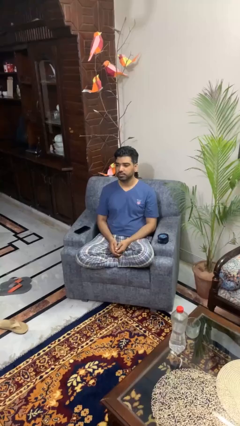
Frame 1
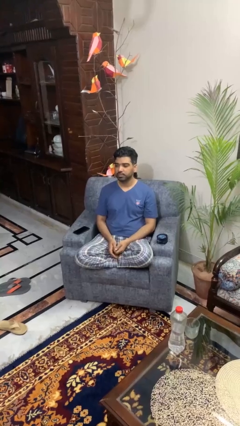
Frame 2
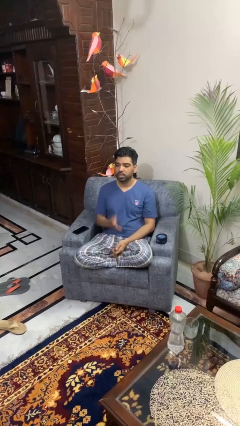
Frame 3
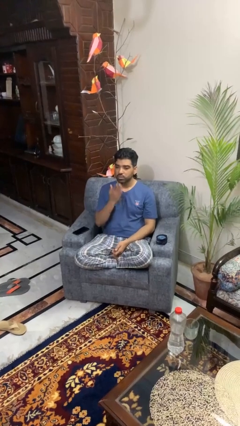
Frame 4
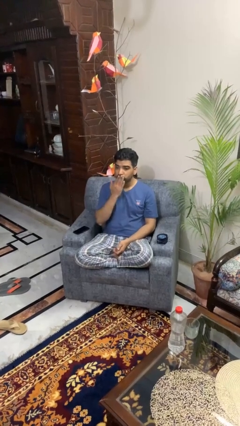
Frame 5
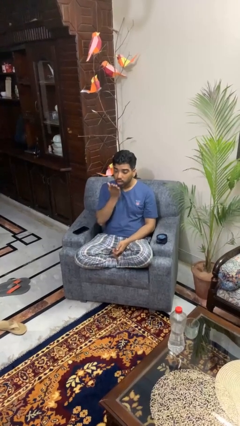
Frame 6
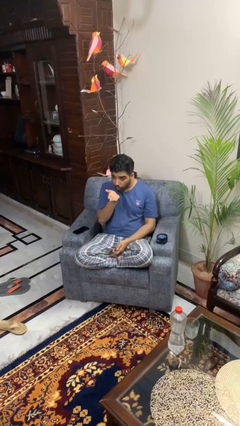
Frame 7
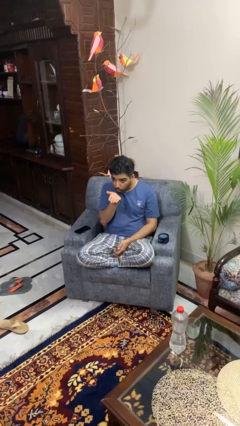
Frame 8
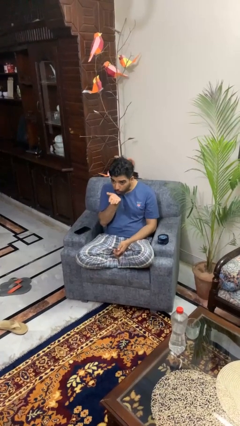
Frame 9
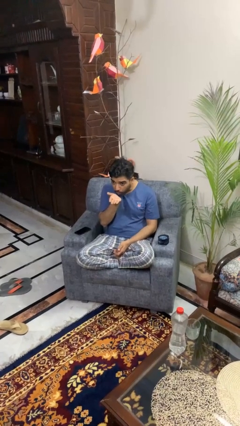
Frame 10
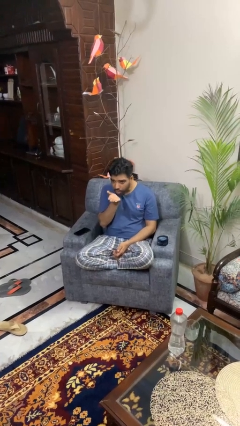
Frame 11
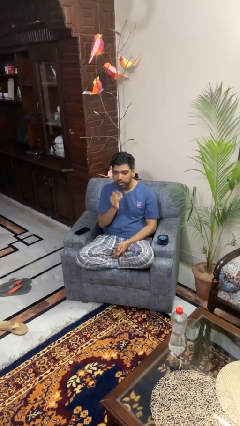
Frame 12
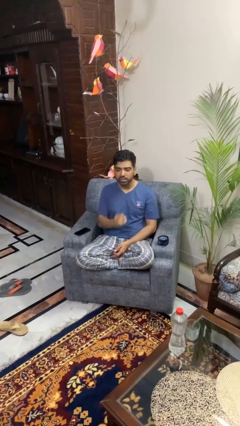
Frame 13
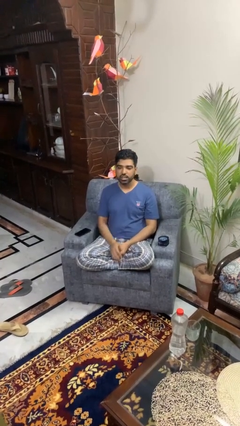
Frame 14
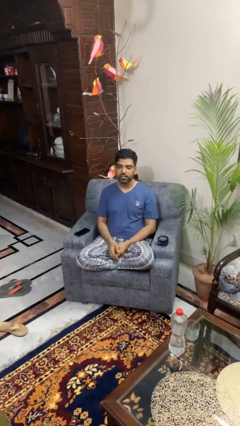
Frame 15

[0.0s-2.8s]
person gestures blow kiss

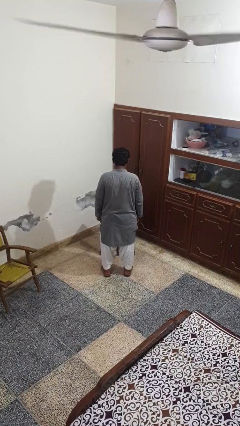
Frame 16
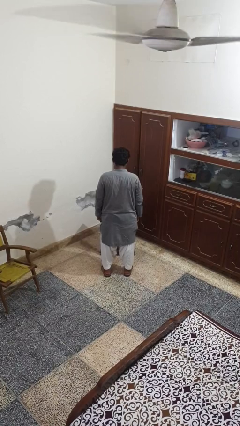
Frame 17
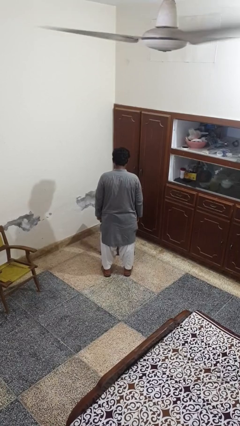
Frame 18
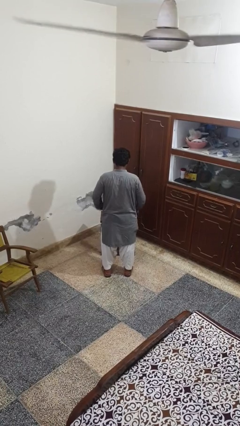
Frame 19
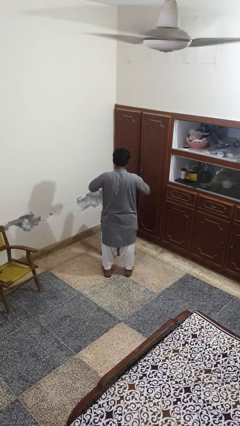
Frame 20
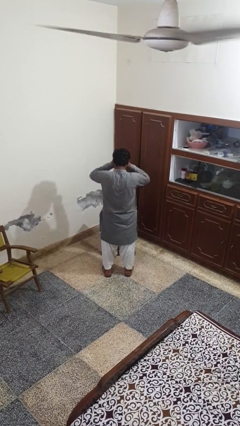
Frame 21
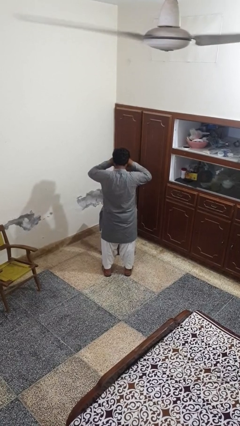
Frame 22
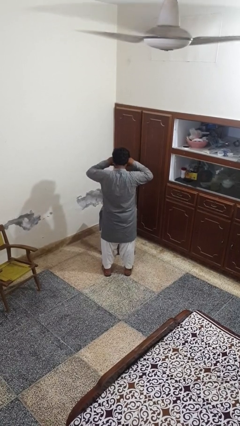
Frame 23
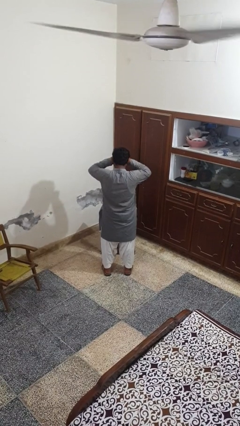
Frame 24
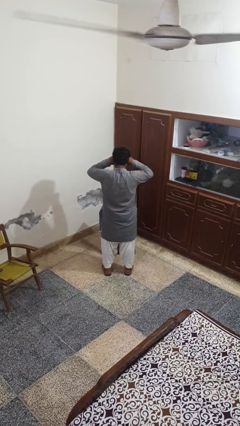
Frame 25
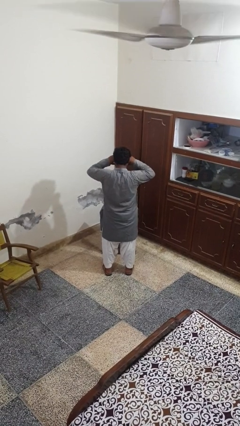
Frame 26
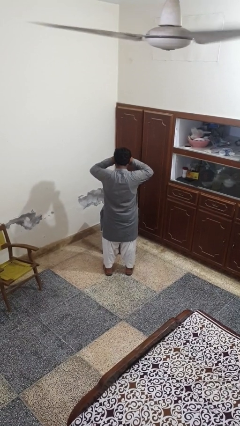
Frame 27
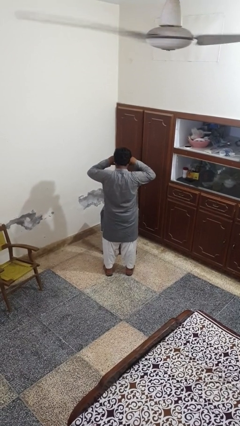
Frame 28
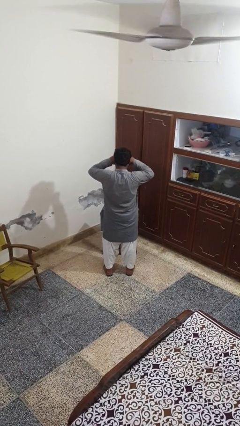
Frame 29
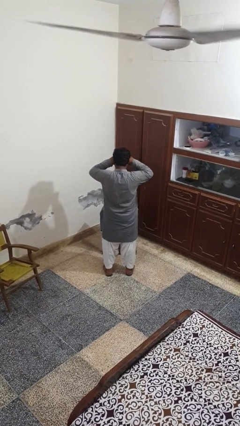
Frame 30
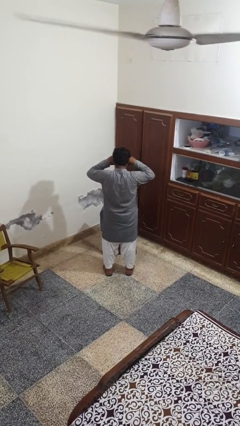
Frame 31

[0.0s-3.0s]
person rubs eyes

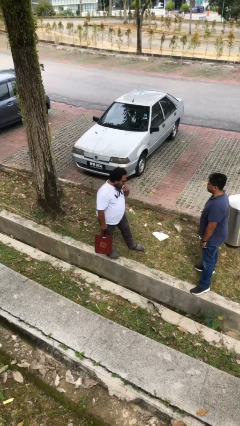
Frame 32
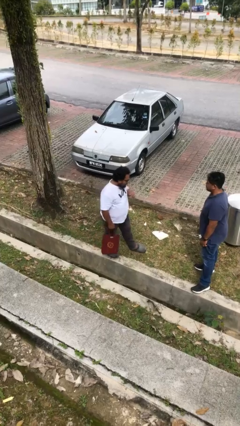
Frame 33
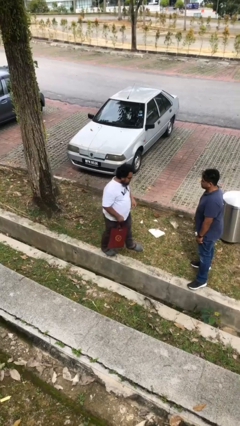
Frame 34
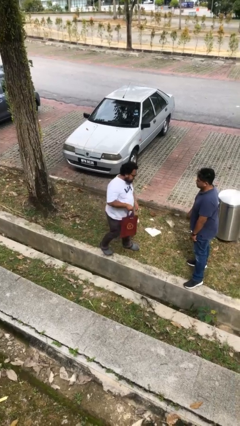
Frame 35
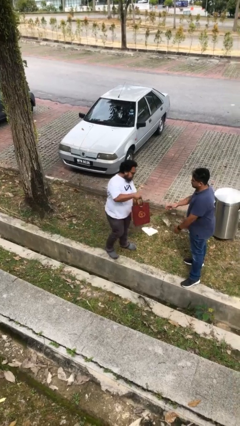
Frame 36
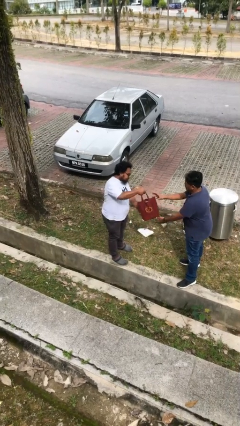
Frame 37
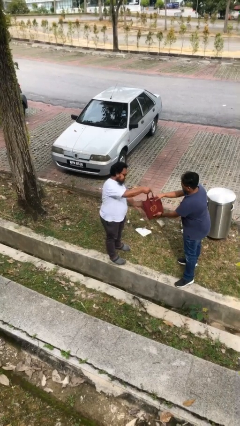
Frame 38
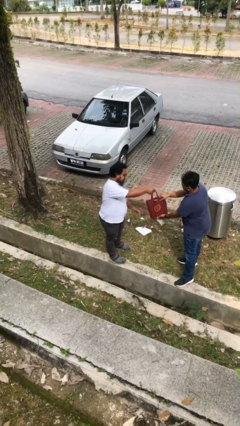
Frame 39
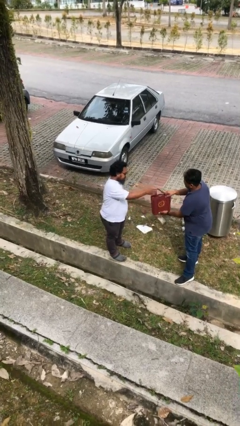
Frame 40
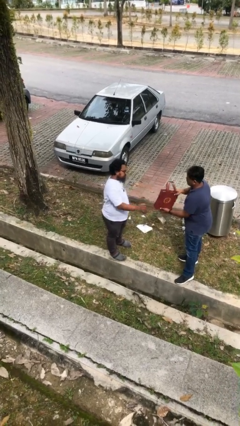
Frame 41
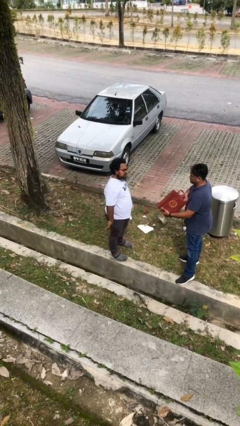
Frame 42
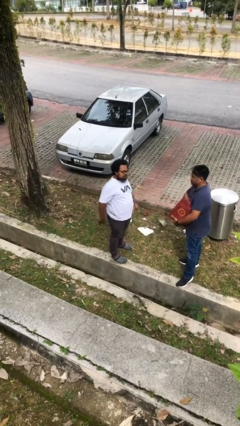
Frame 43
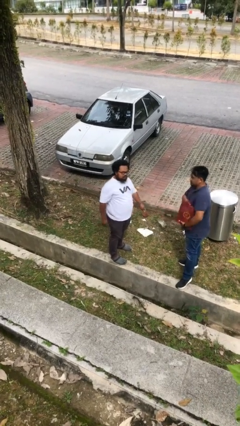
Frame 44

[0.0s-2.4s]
person transfers object to person

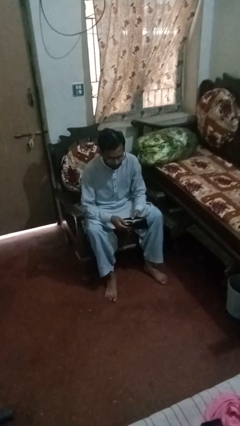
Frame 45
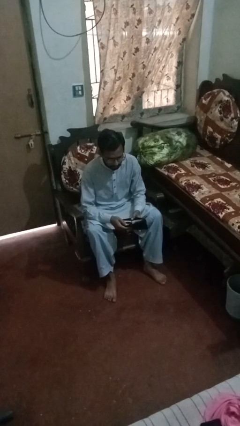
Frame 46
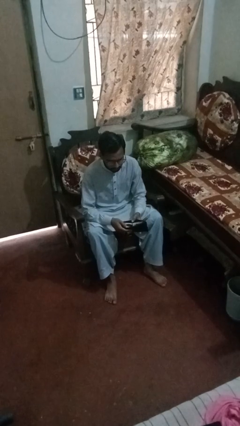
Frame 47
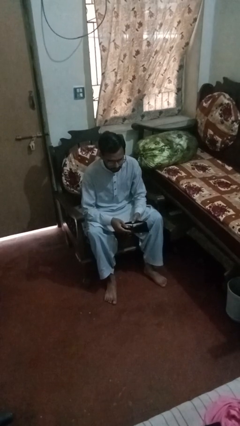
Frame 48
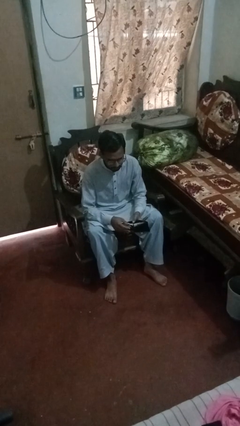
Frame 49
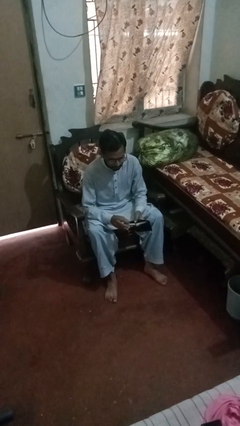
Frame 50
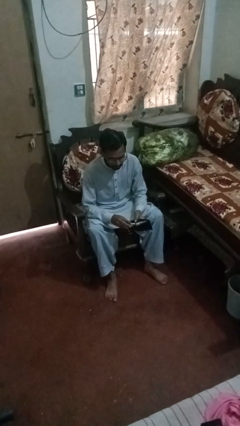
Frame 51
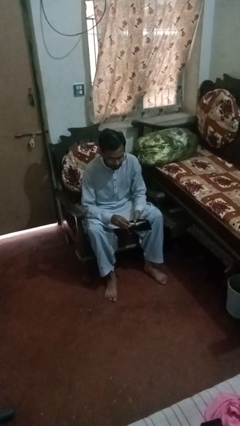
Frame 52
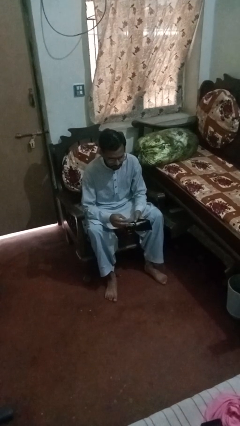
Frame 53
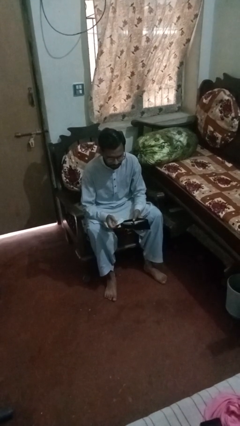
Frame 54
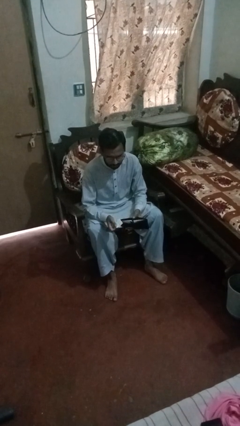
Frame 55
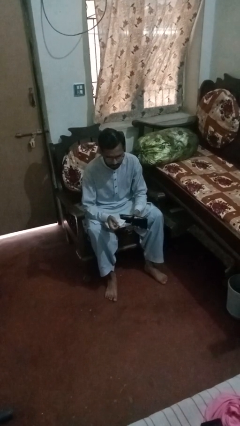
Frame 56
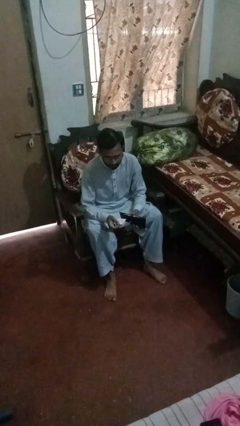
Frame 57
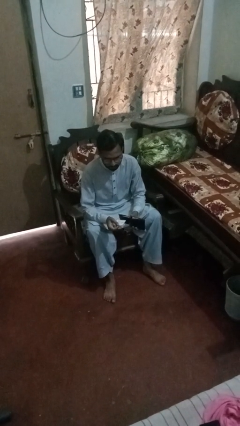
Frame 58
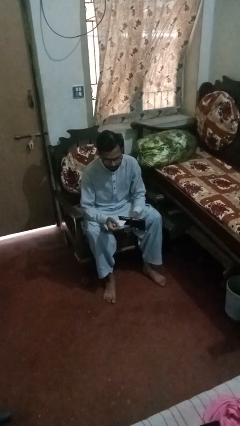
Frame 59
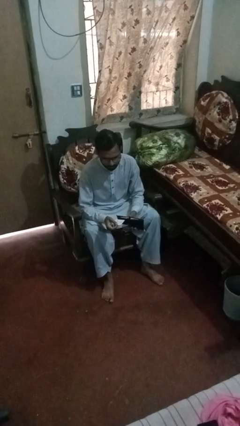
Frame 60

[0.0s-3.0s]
person takes object from purse

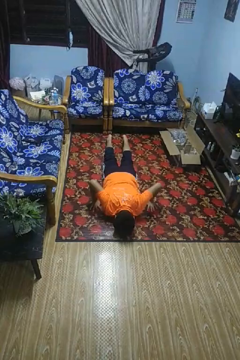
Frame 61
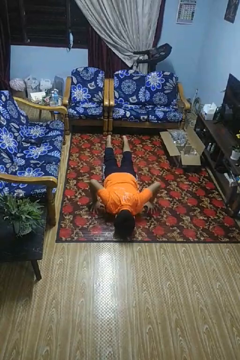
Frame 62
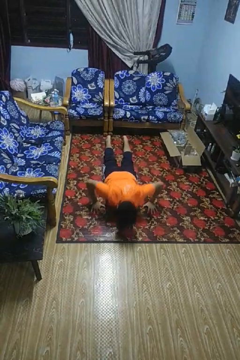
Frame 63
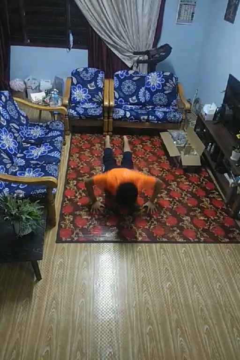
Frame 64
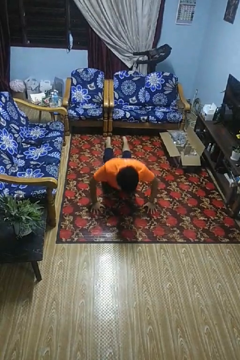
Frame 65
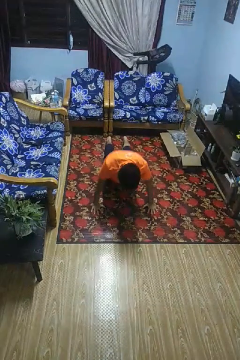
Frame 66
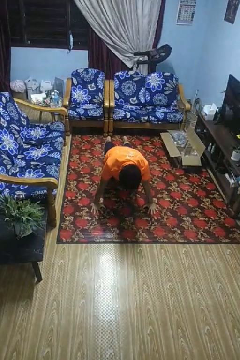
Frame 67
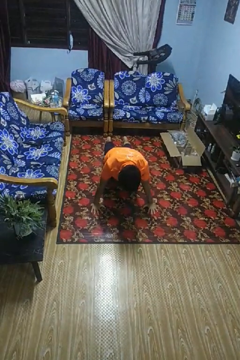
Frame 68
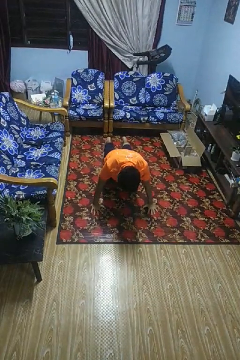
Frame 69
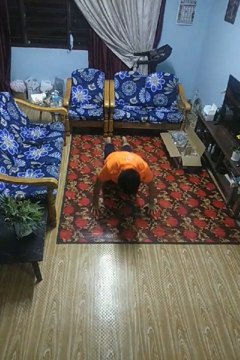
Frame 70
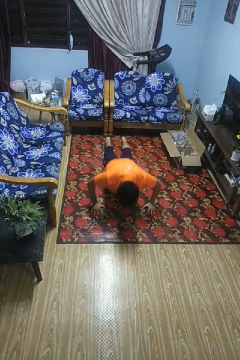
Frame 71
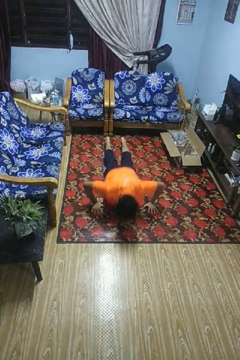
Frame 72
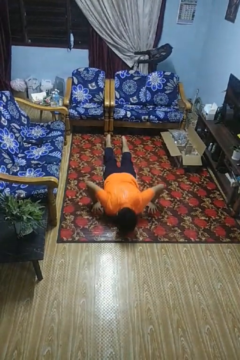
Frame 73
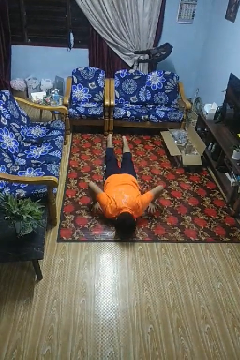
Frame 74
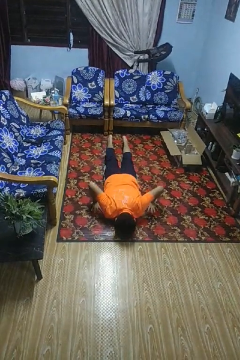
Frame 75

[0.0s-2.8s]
person exercises with pushup

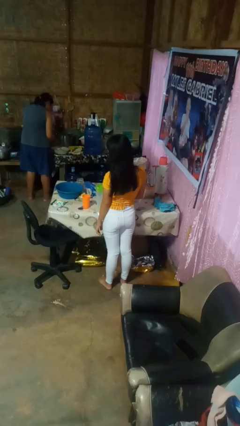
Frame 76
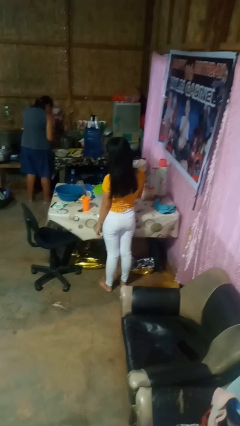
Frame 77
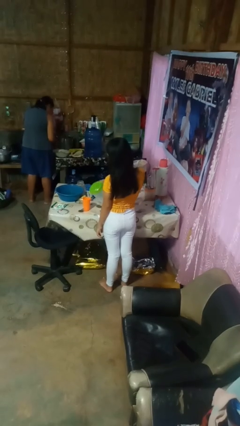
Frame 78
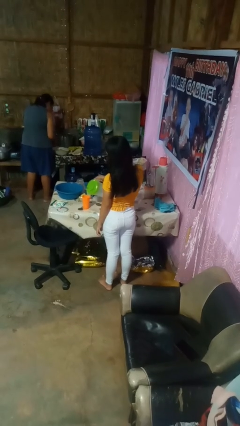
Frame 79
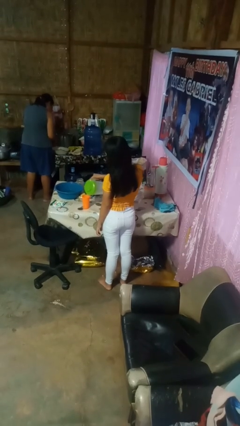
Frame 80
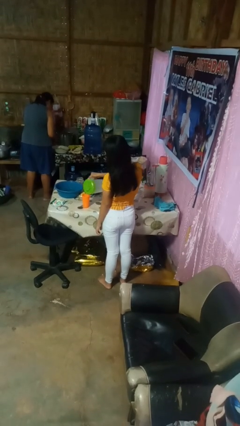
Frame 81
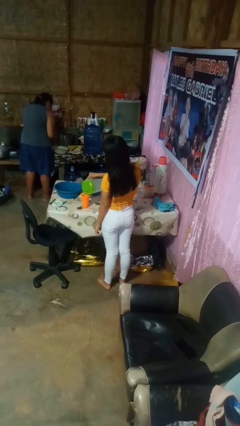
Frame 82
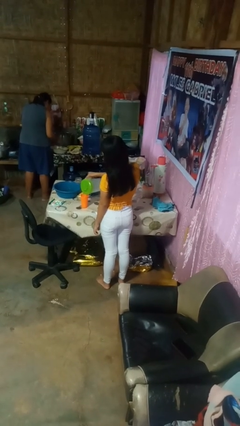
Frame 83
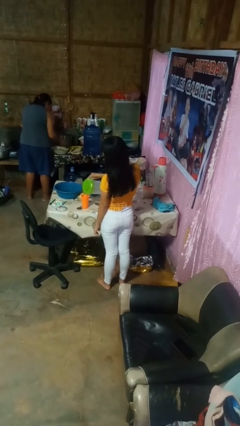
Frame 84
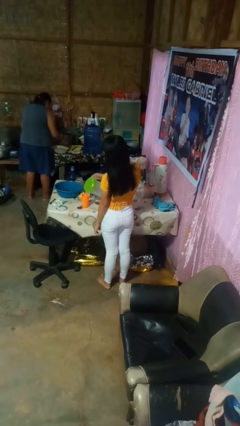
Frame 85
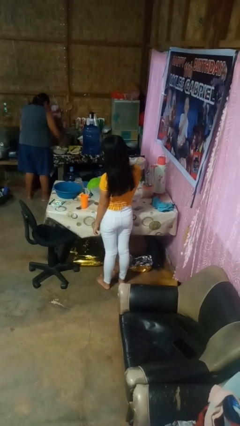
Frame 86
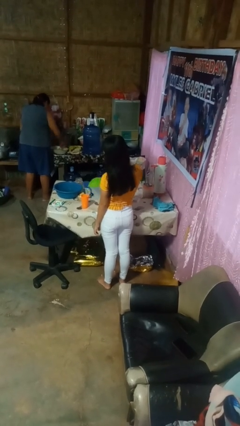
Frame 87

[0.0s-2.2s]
person pours liquid into cup

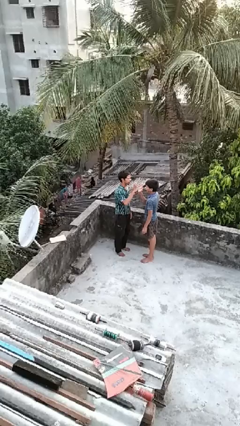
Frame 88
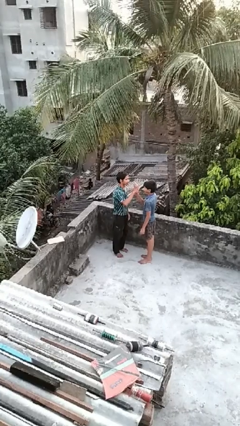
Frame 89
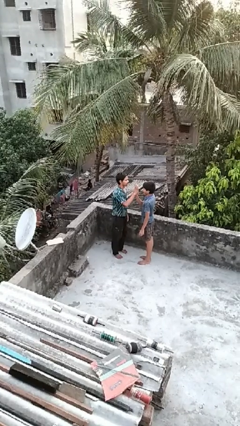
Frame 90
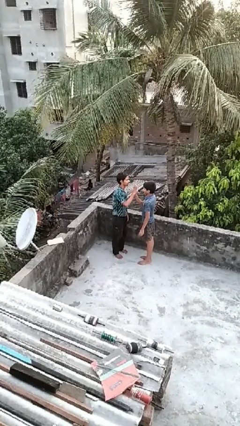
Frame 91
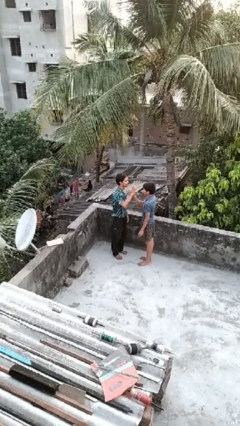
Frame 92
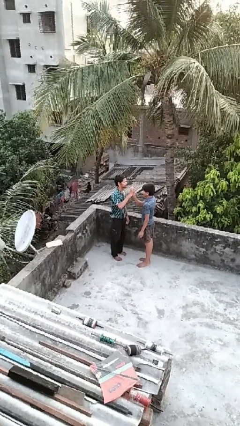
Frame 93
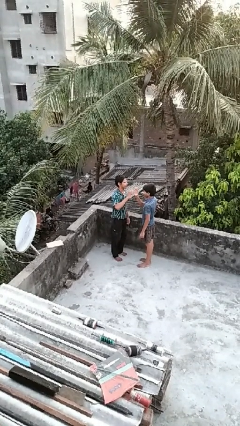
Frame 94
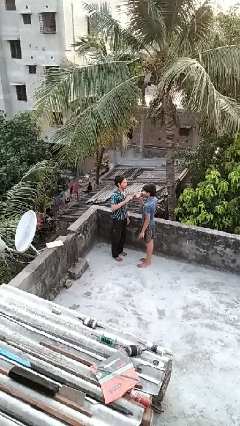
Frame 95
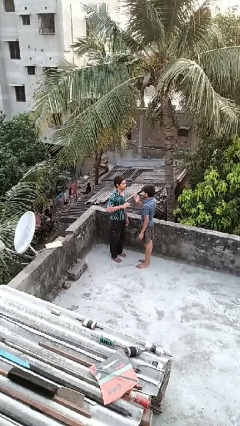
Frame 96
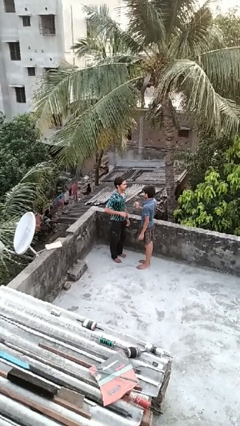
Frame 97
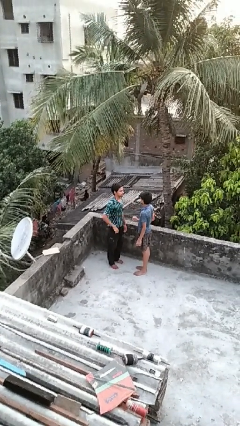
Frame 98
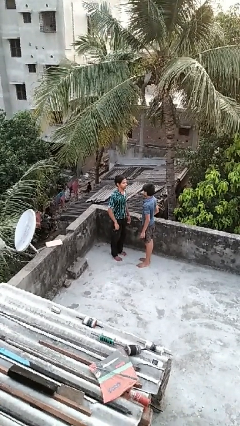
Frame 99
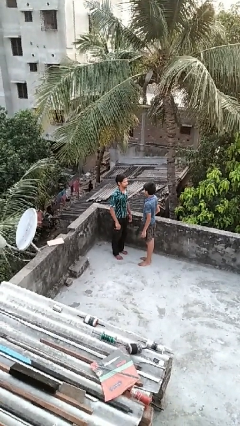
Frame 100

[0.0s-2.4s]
person highfives hand
